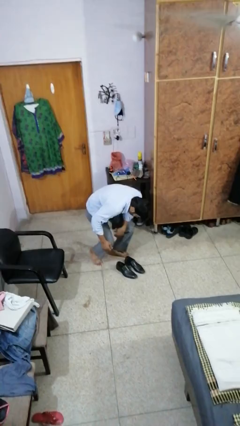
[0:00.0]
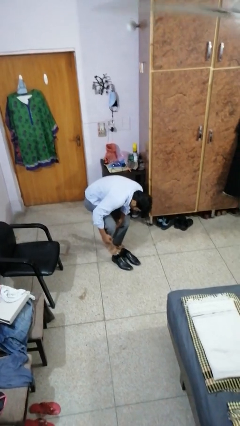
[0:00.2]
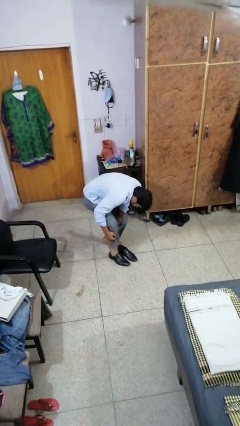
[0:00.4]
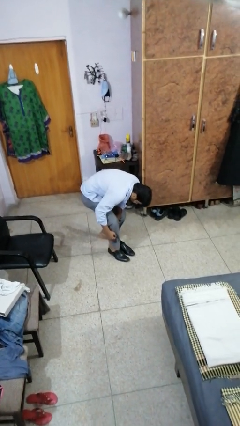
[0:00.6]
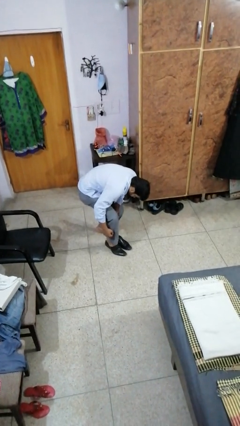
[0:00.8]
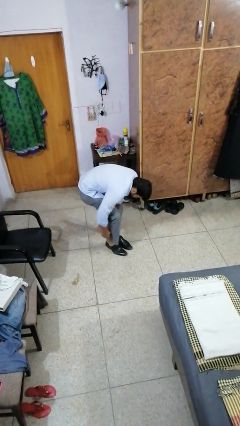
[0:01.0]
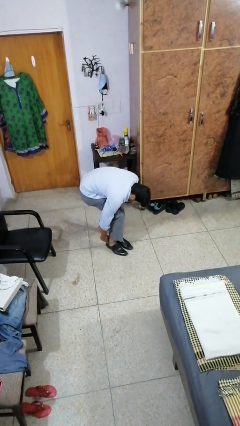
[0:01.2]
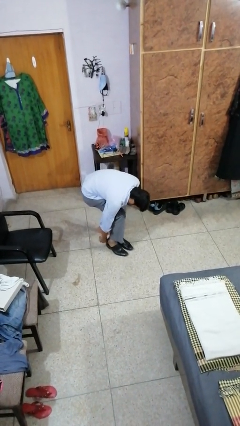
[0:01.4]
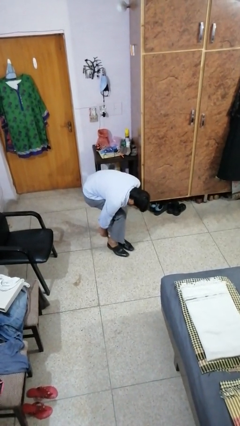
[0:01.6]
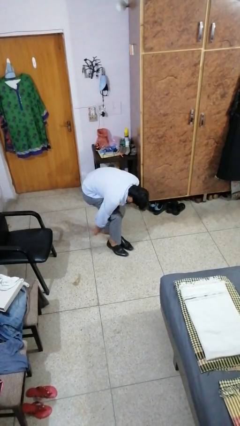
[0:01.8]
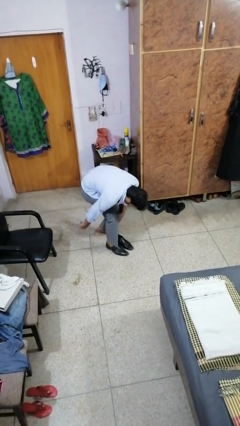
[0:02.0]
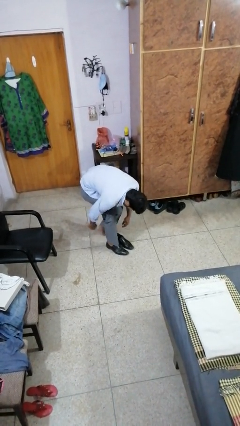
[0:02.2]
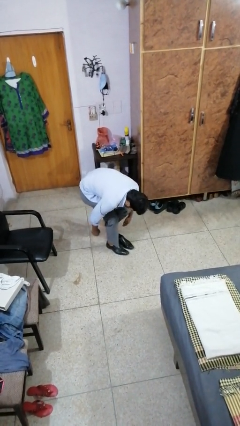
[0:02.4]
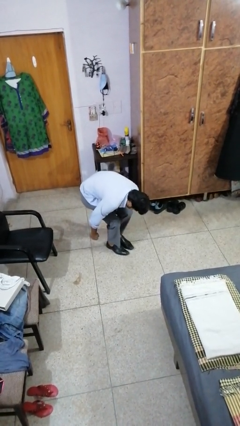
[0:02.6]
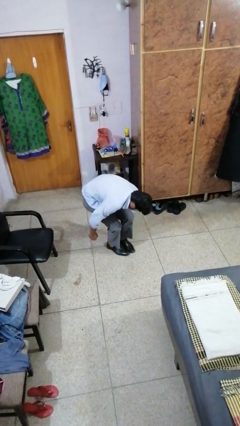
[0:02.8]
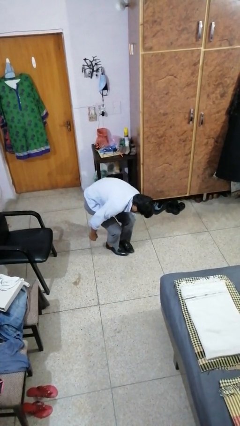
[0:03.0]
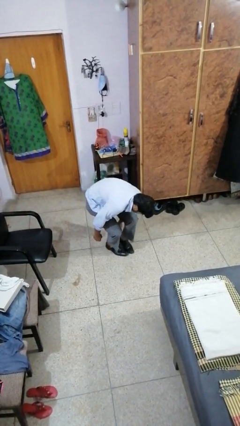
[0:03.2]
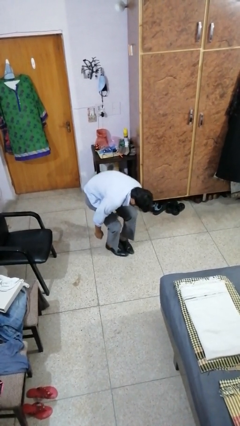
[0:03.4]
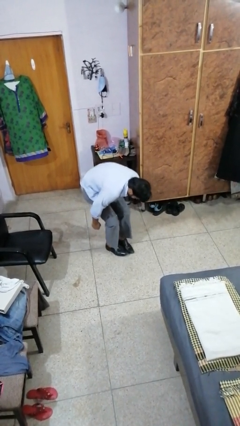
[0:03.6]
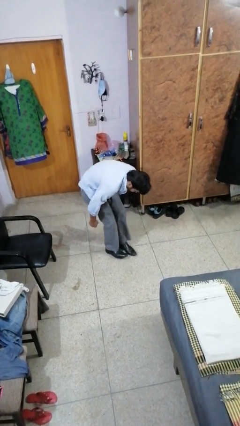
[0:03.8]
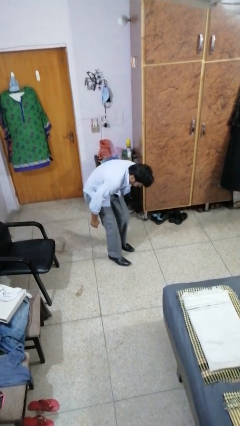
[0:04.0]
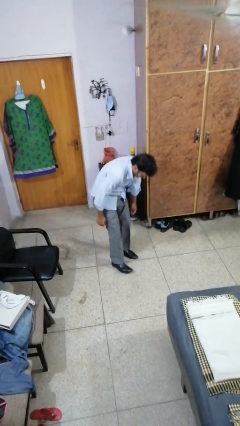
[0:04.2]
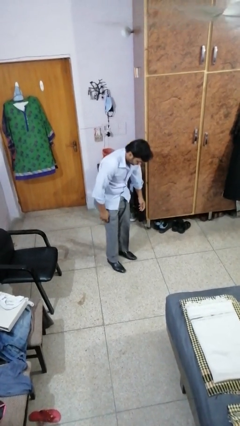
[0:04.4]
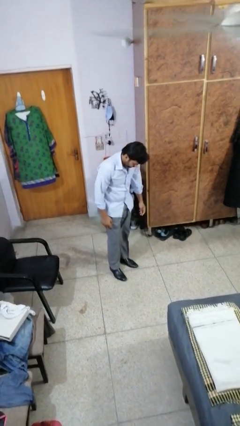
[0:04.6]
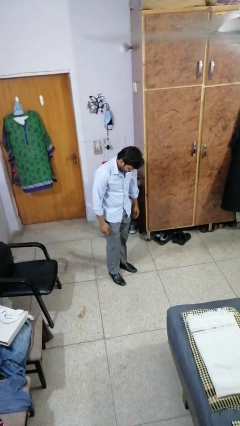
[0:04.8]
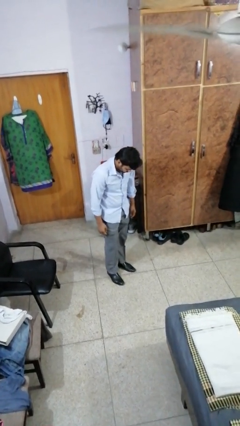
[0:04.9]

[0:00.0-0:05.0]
person puts on shoes

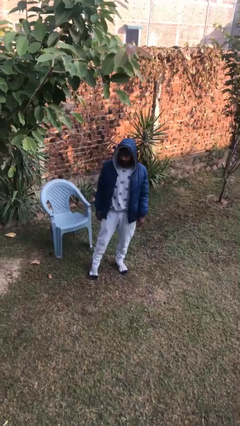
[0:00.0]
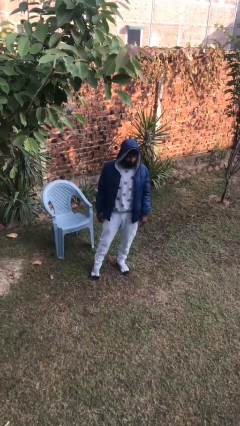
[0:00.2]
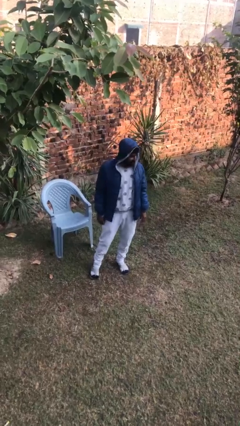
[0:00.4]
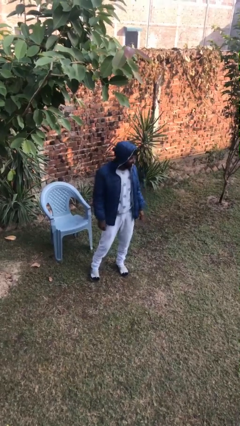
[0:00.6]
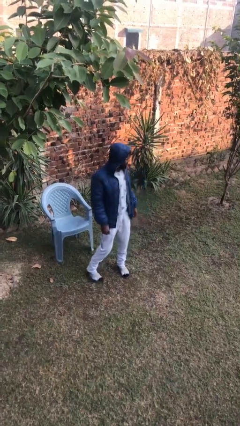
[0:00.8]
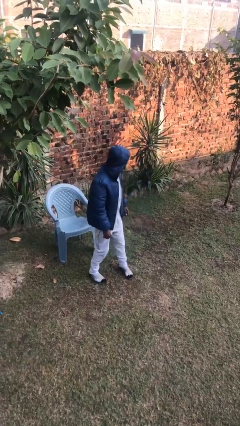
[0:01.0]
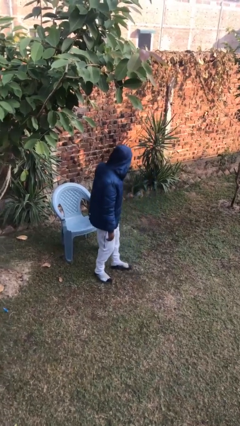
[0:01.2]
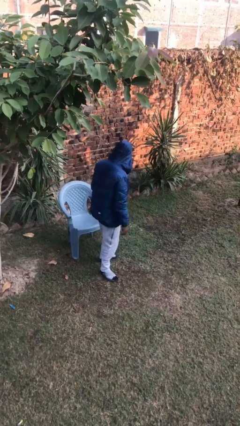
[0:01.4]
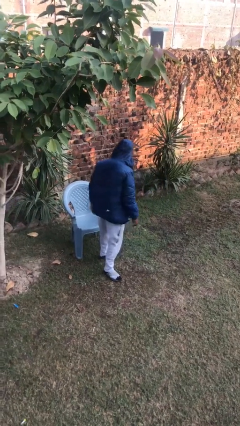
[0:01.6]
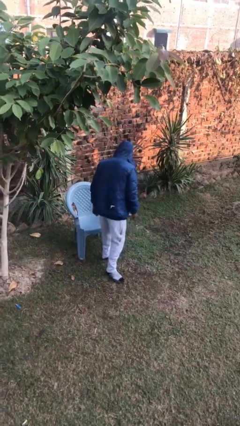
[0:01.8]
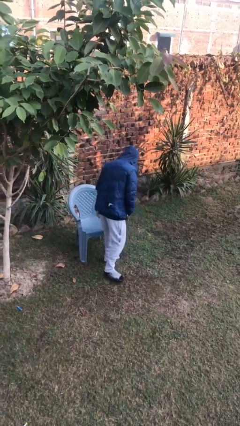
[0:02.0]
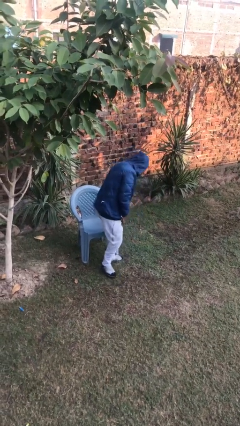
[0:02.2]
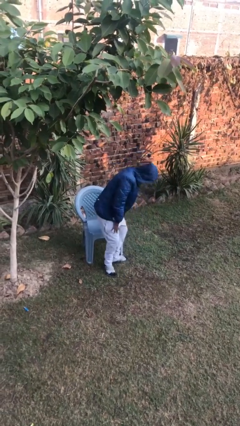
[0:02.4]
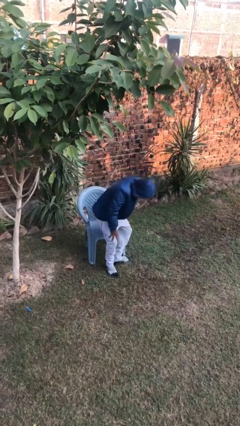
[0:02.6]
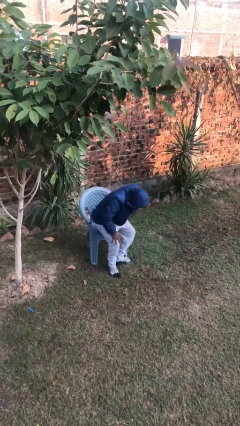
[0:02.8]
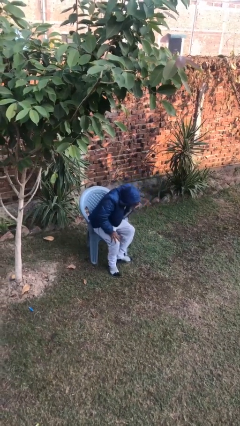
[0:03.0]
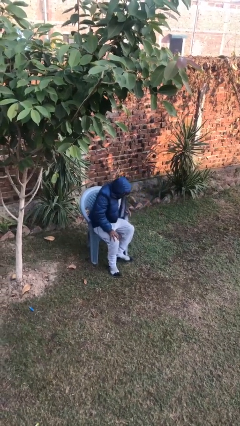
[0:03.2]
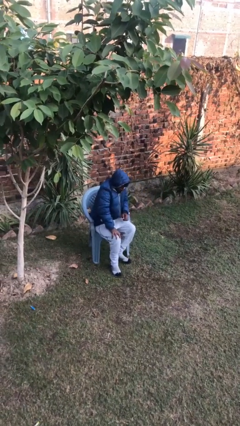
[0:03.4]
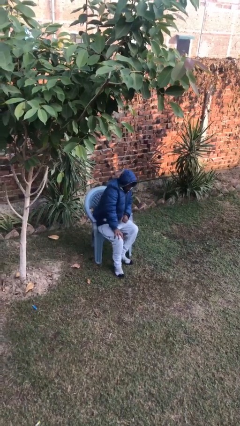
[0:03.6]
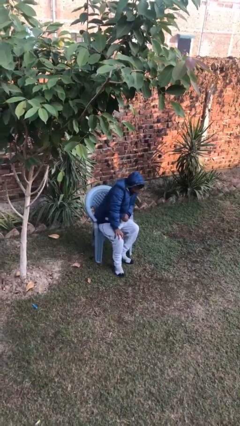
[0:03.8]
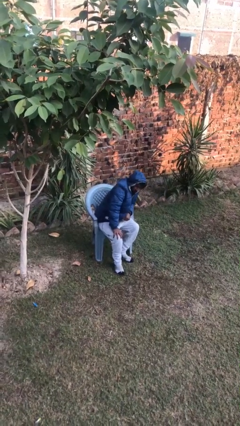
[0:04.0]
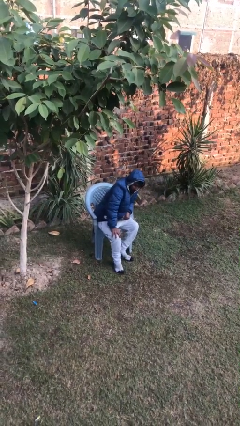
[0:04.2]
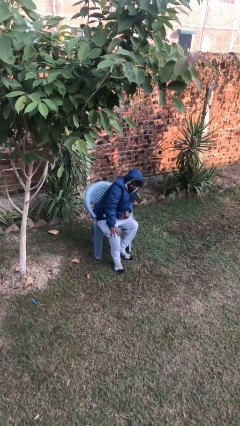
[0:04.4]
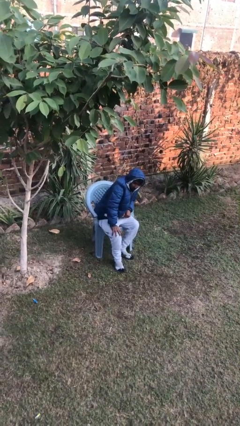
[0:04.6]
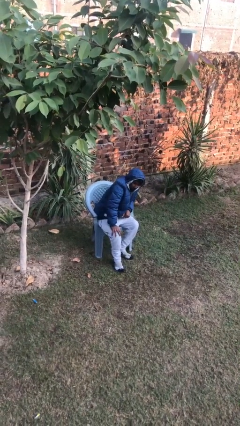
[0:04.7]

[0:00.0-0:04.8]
person sits down

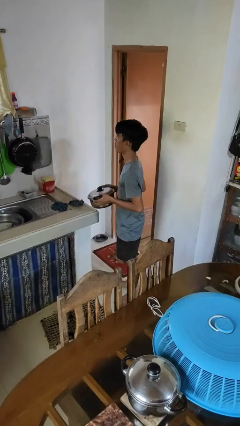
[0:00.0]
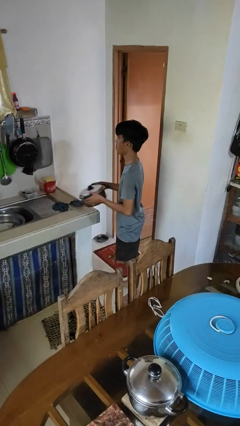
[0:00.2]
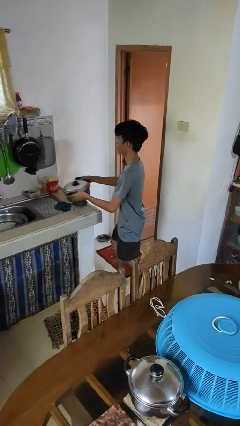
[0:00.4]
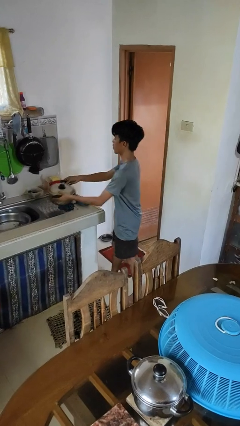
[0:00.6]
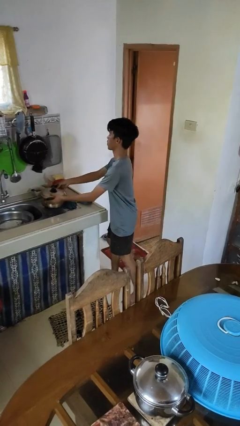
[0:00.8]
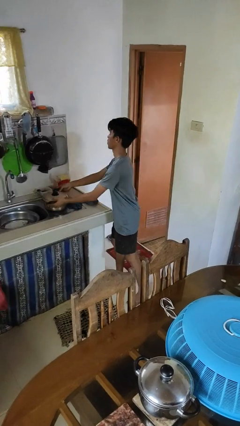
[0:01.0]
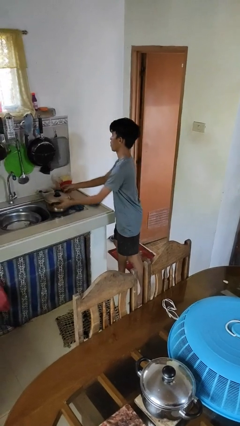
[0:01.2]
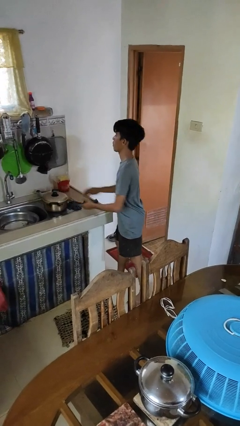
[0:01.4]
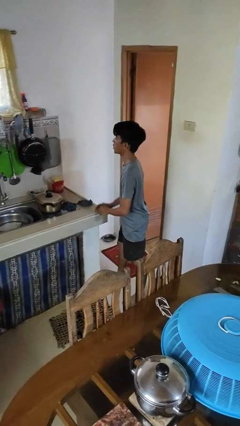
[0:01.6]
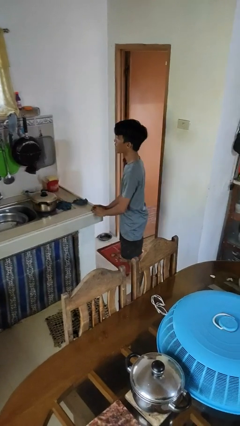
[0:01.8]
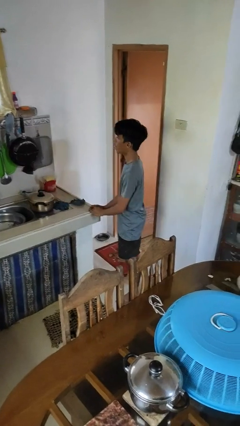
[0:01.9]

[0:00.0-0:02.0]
person puts down object on countertop

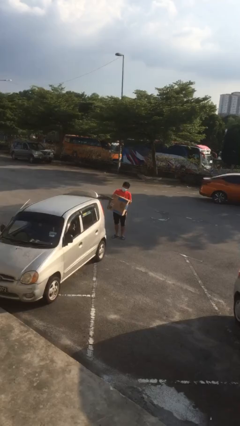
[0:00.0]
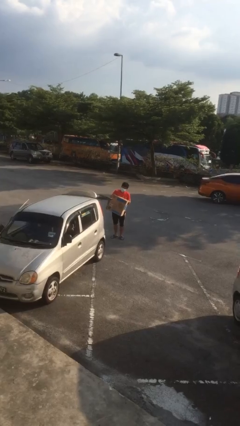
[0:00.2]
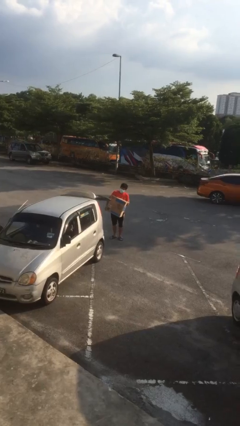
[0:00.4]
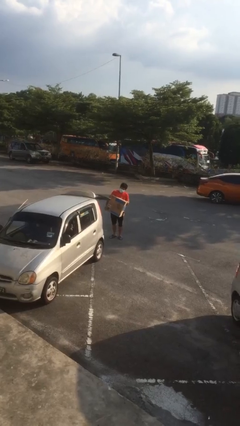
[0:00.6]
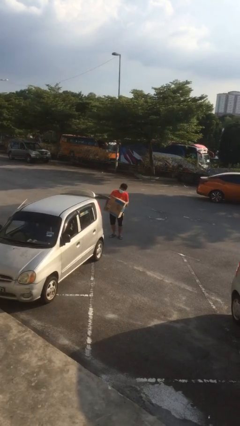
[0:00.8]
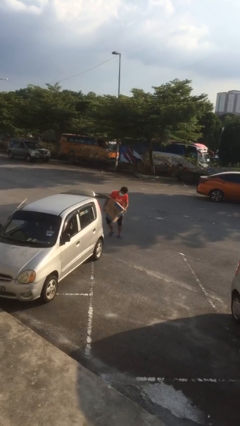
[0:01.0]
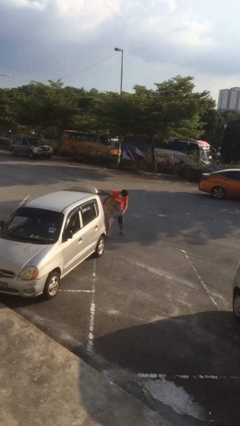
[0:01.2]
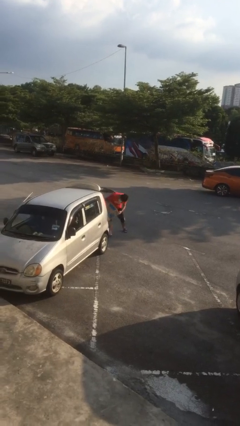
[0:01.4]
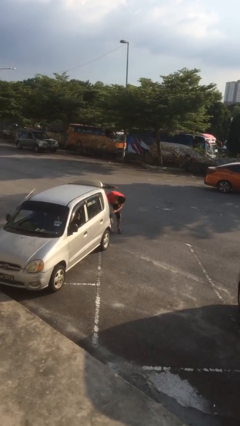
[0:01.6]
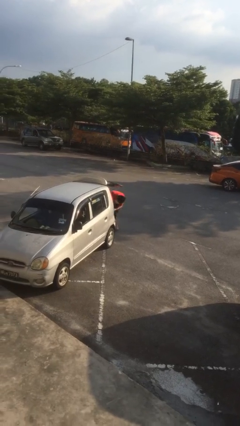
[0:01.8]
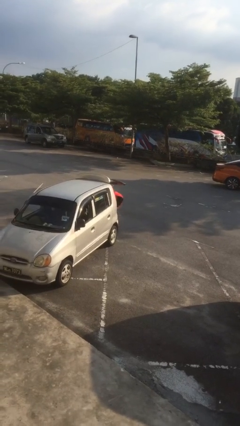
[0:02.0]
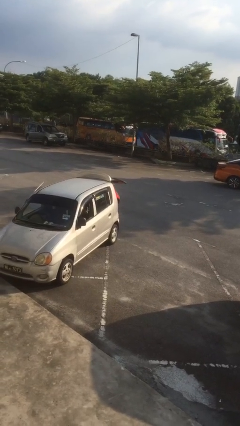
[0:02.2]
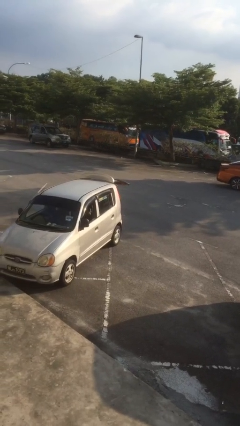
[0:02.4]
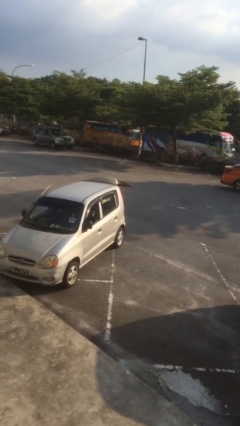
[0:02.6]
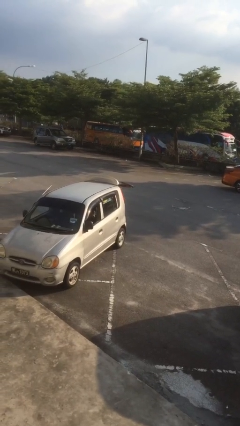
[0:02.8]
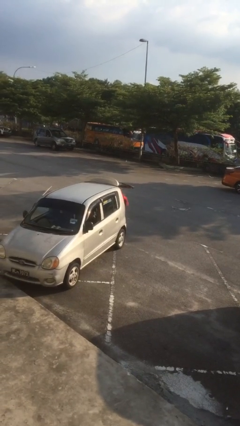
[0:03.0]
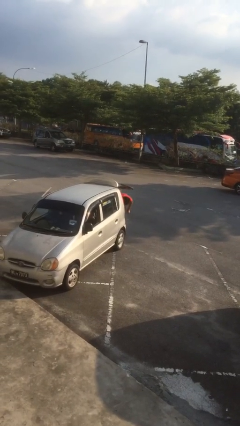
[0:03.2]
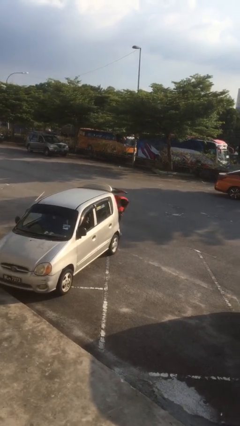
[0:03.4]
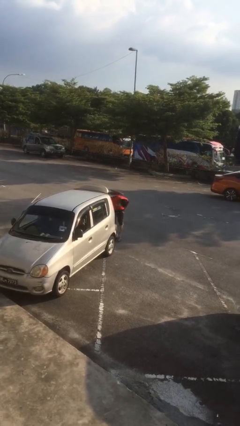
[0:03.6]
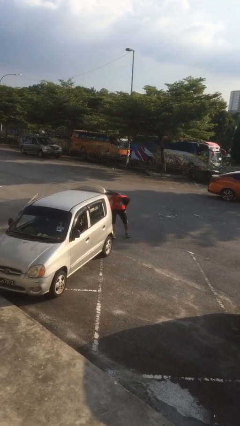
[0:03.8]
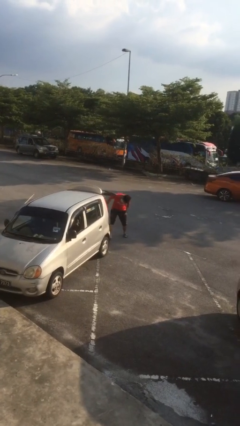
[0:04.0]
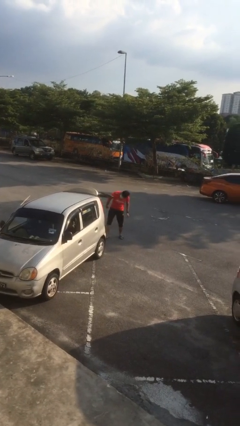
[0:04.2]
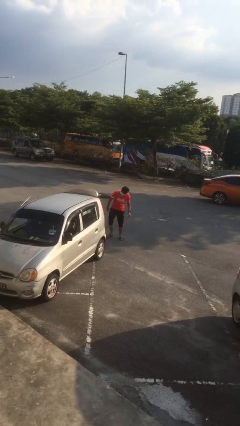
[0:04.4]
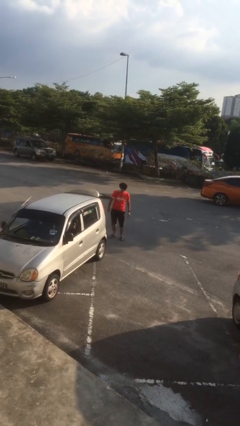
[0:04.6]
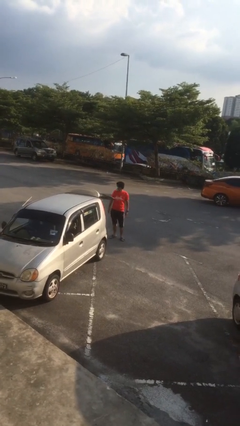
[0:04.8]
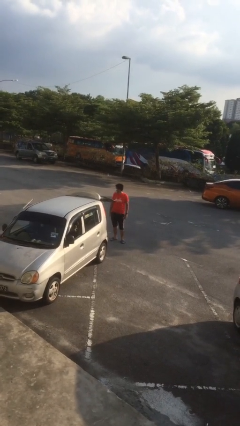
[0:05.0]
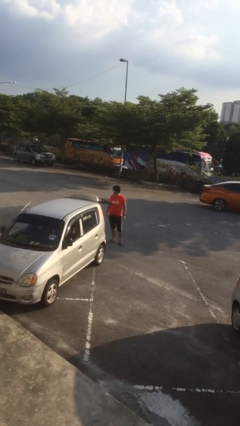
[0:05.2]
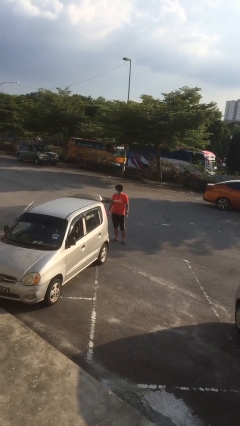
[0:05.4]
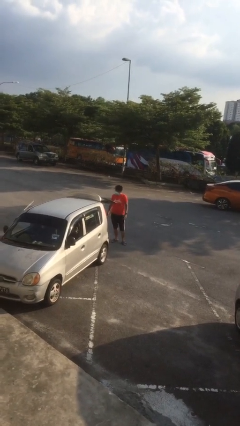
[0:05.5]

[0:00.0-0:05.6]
person loads car

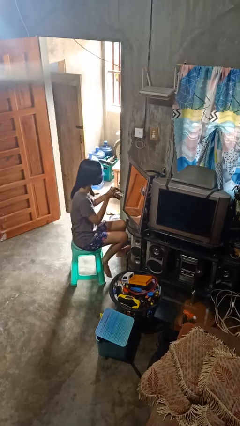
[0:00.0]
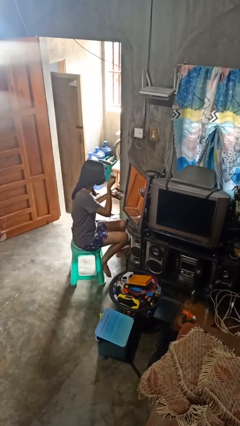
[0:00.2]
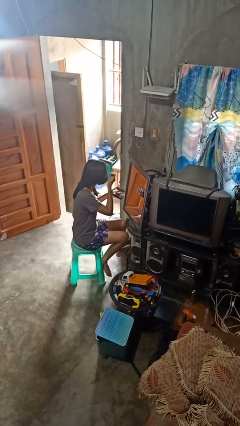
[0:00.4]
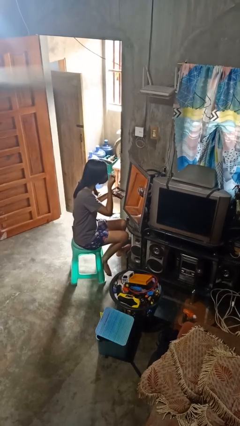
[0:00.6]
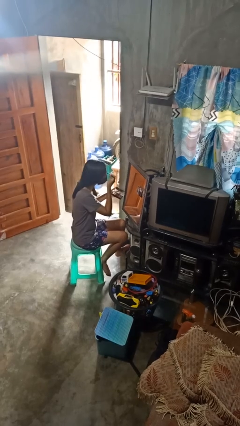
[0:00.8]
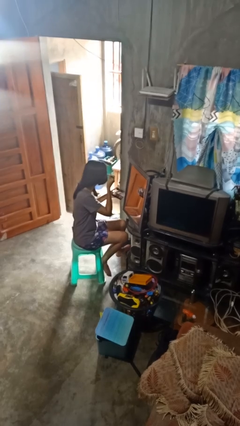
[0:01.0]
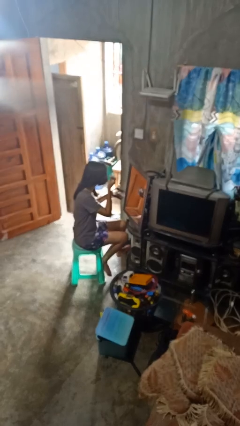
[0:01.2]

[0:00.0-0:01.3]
person applies eye makeup
